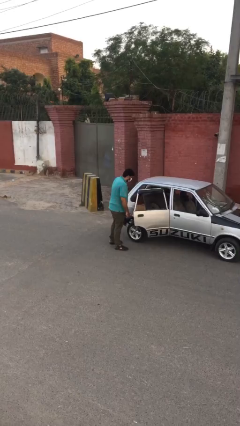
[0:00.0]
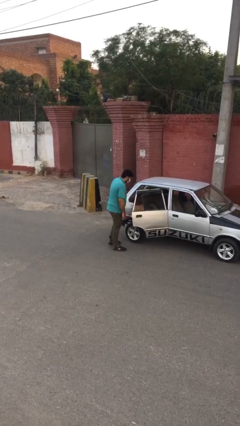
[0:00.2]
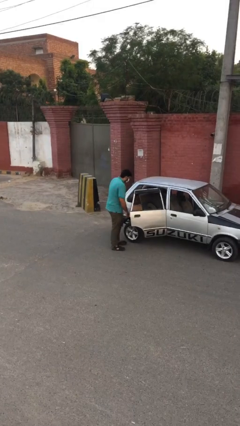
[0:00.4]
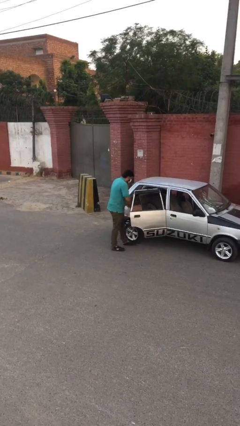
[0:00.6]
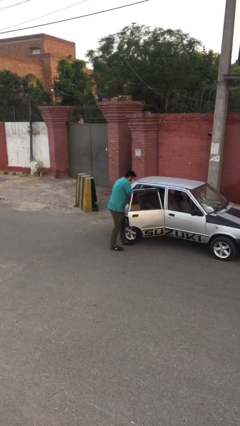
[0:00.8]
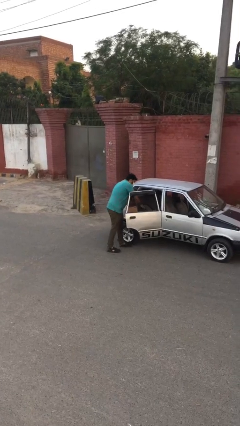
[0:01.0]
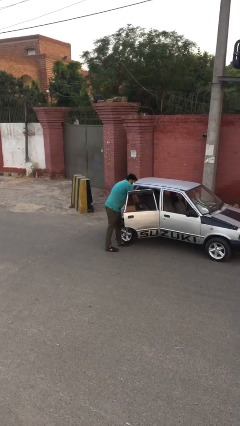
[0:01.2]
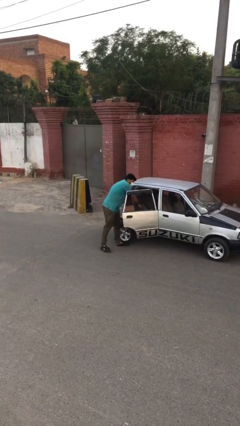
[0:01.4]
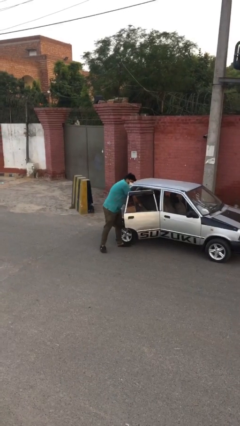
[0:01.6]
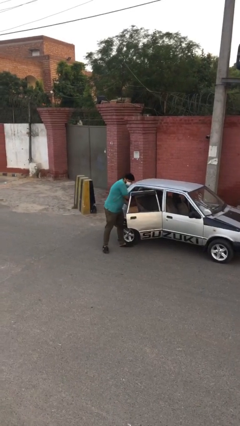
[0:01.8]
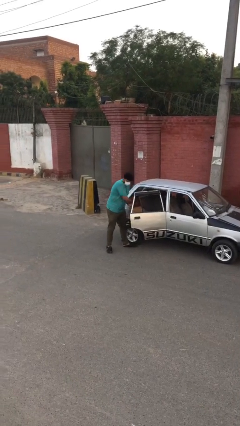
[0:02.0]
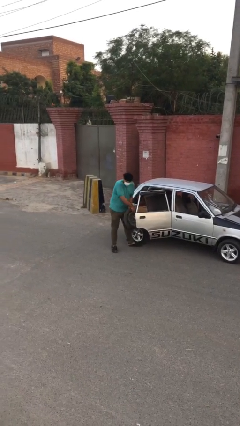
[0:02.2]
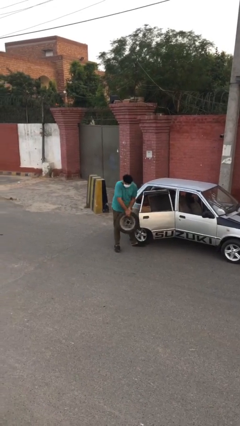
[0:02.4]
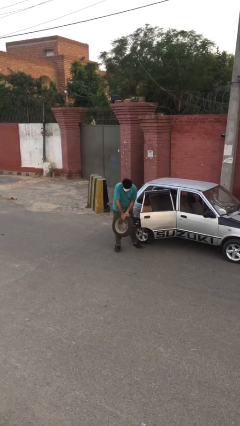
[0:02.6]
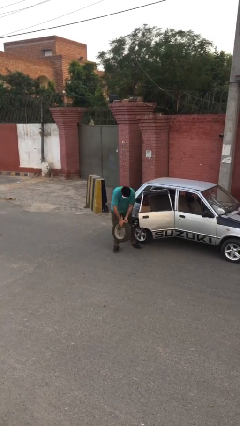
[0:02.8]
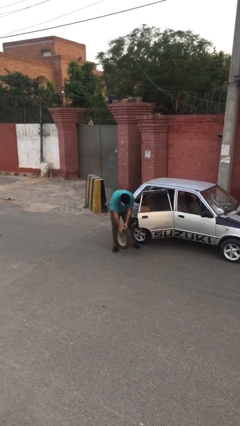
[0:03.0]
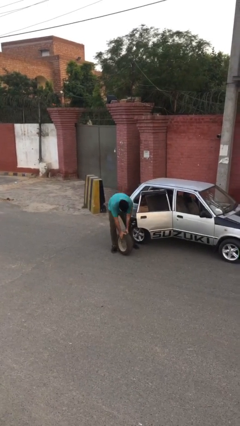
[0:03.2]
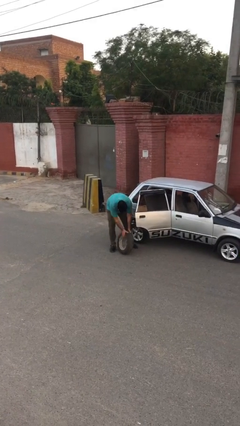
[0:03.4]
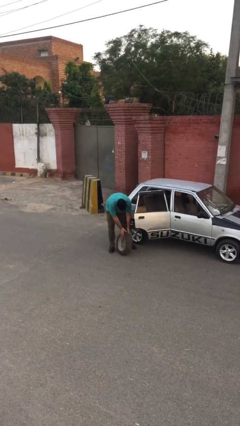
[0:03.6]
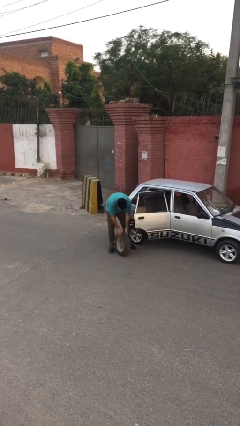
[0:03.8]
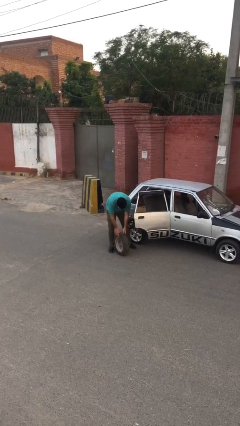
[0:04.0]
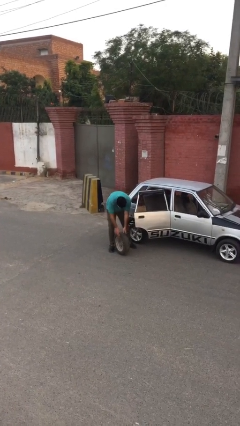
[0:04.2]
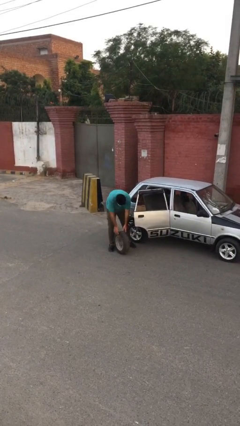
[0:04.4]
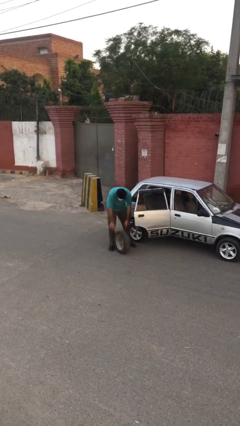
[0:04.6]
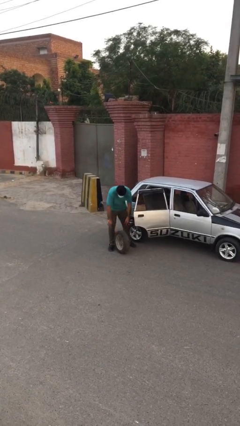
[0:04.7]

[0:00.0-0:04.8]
person unloads car

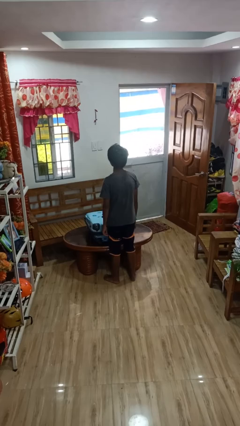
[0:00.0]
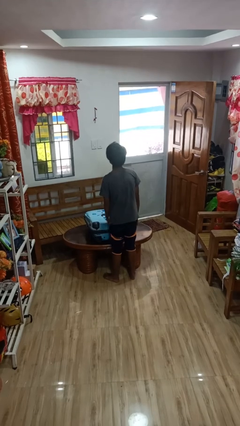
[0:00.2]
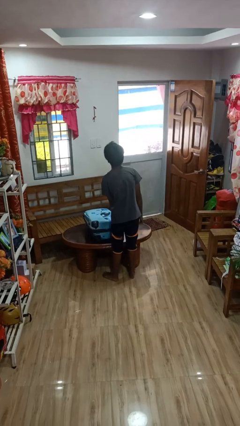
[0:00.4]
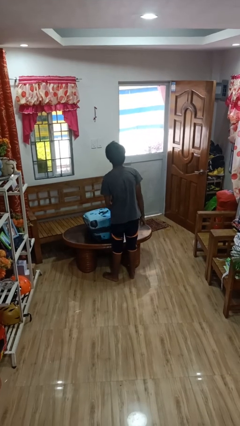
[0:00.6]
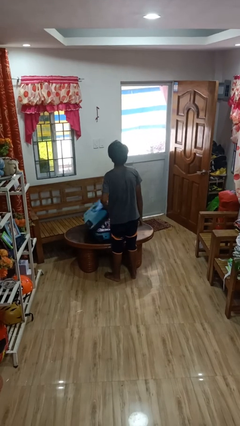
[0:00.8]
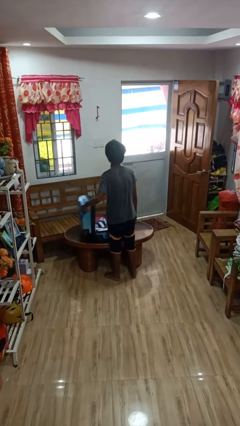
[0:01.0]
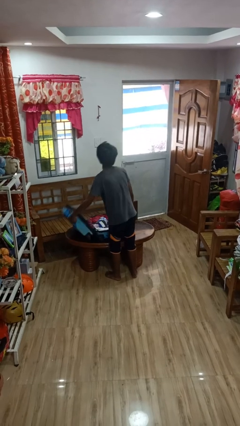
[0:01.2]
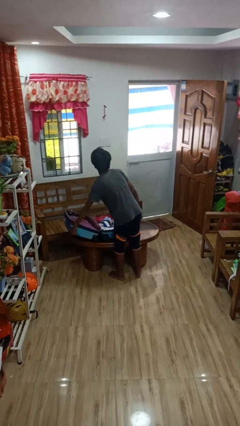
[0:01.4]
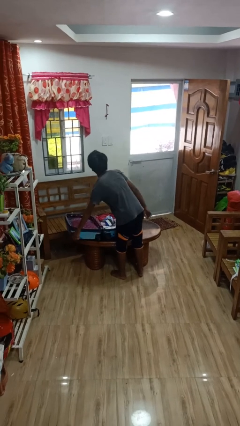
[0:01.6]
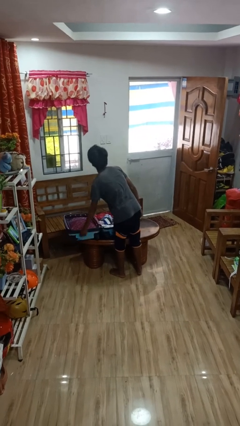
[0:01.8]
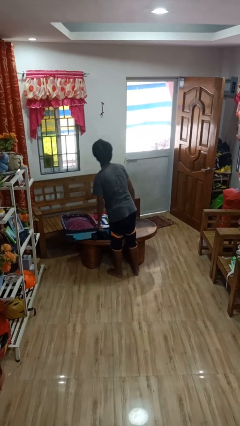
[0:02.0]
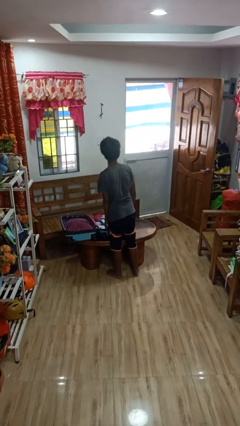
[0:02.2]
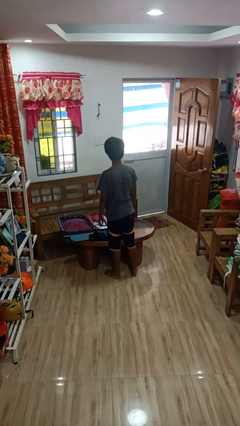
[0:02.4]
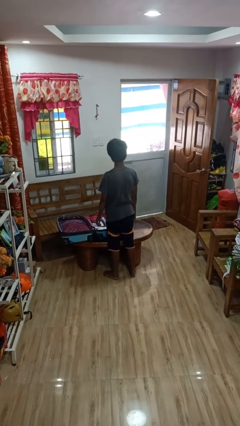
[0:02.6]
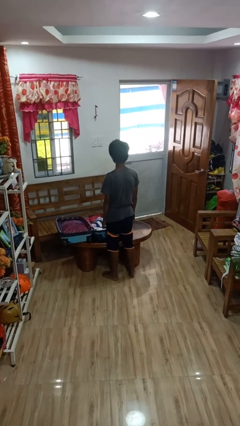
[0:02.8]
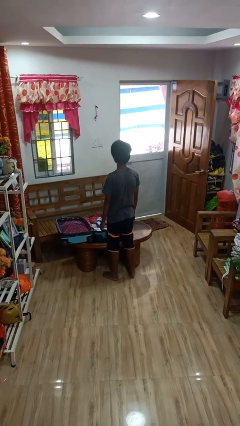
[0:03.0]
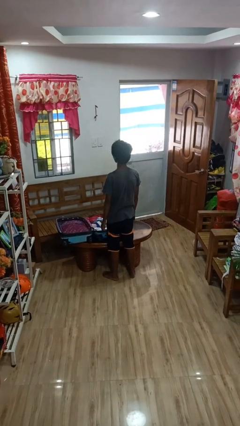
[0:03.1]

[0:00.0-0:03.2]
person opens suitcase

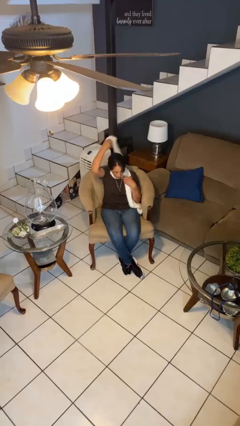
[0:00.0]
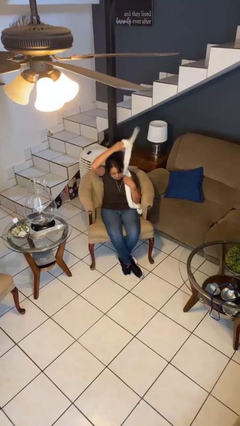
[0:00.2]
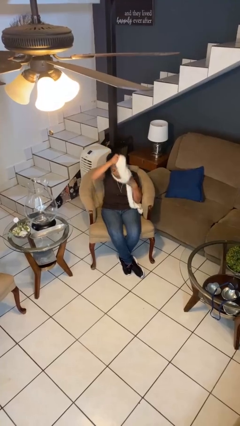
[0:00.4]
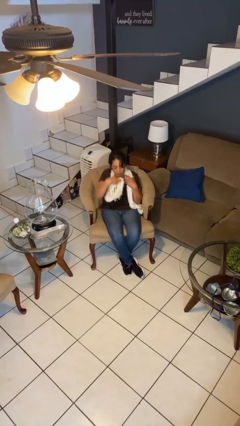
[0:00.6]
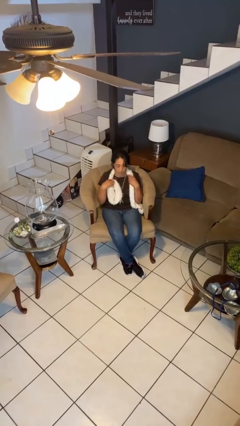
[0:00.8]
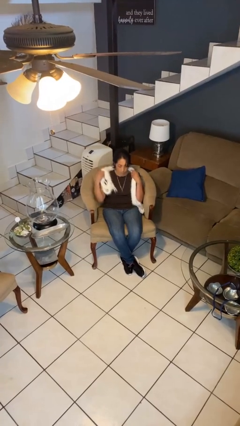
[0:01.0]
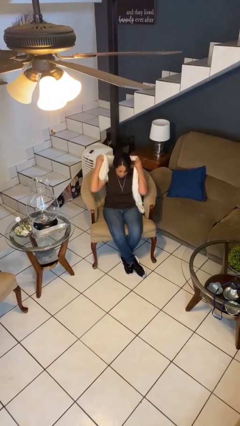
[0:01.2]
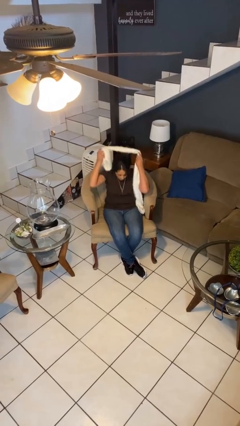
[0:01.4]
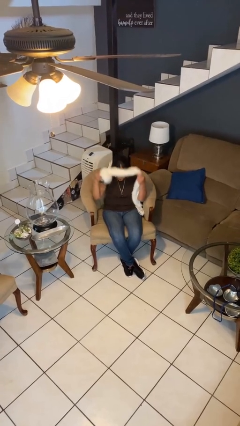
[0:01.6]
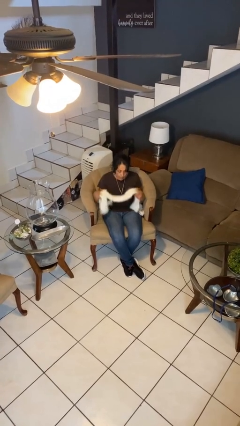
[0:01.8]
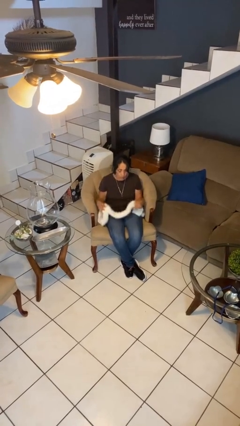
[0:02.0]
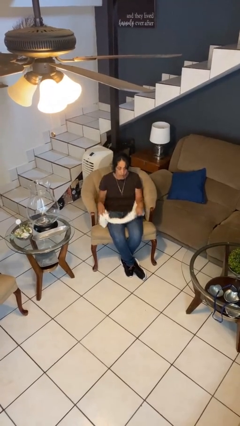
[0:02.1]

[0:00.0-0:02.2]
person takes off scarf

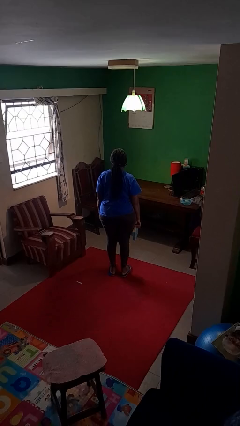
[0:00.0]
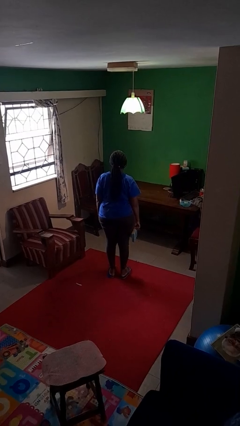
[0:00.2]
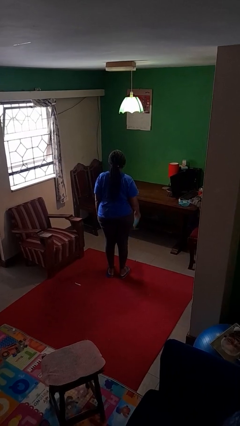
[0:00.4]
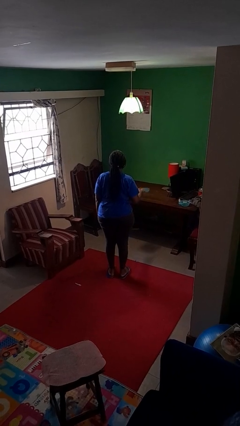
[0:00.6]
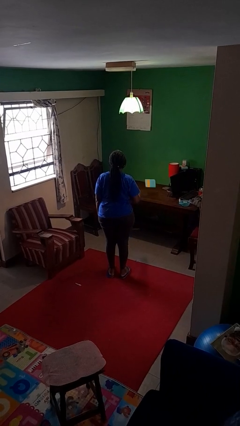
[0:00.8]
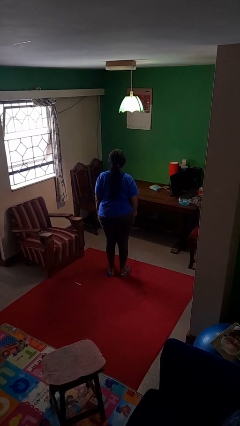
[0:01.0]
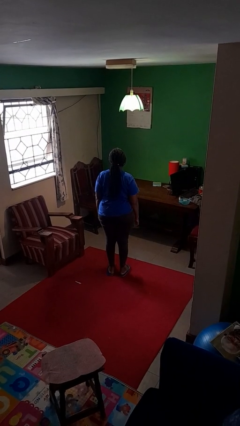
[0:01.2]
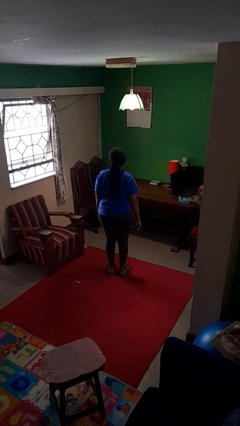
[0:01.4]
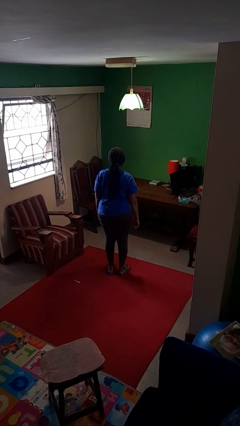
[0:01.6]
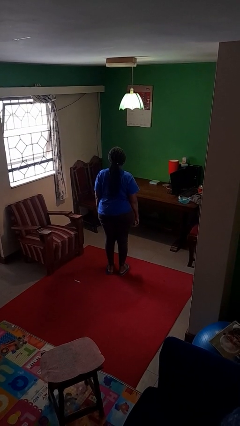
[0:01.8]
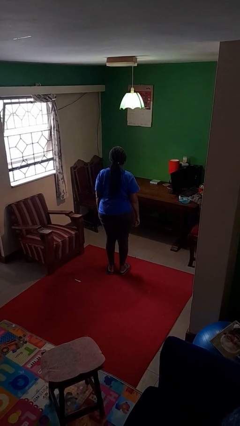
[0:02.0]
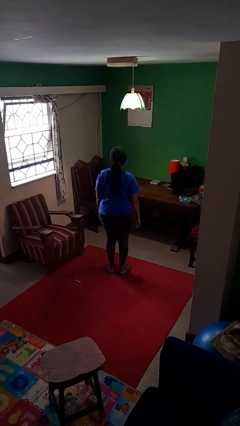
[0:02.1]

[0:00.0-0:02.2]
person throws object on table

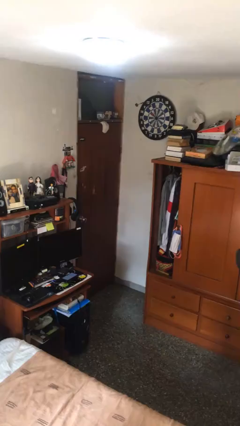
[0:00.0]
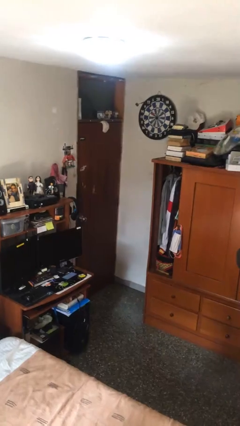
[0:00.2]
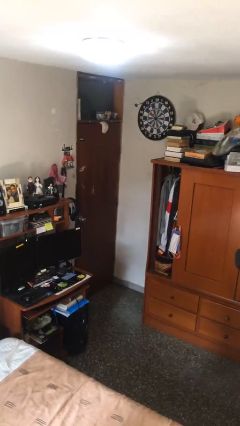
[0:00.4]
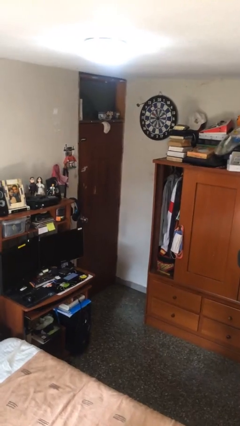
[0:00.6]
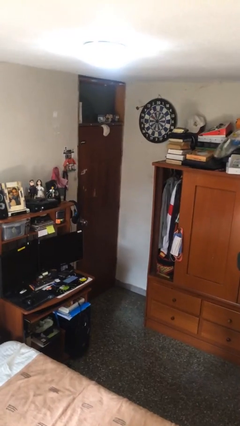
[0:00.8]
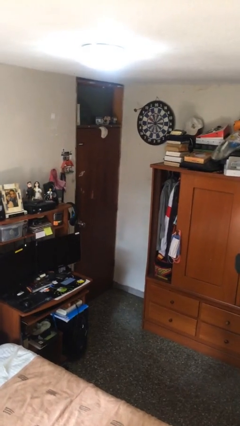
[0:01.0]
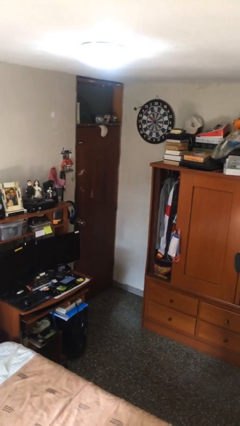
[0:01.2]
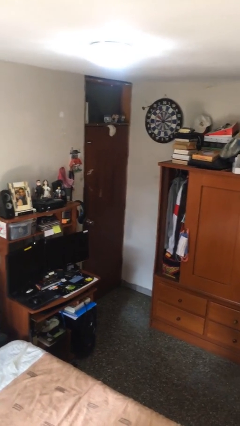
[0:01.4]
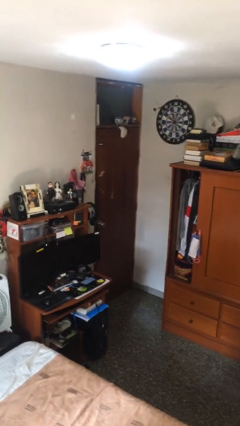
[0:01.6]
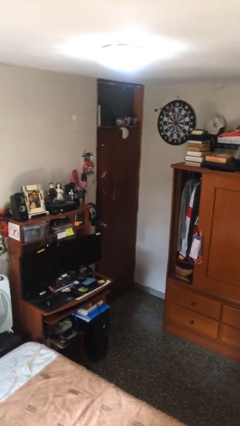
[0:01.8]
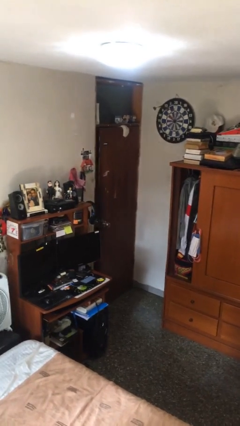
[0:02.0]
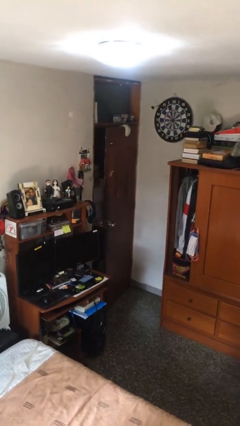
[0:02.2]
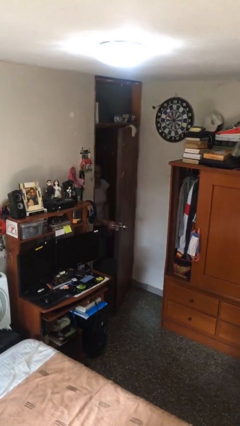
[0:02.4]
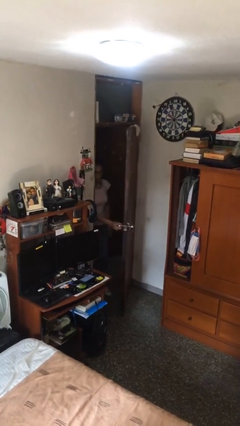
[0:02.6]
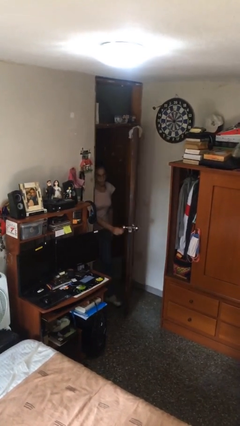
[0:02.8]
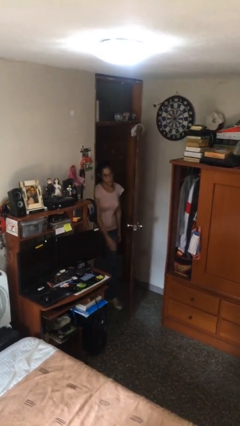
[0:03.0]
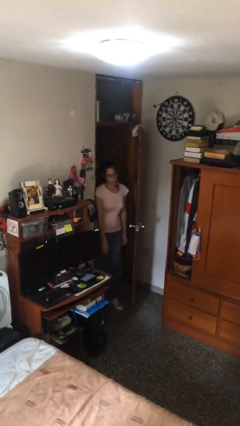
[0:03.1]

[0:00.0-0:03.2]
person opens facility door

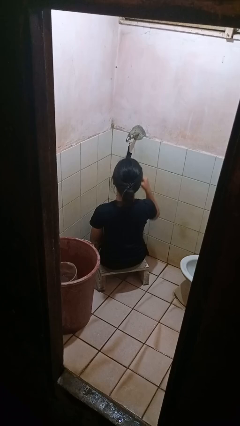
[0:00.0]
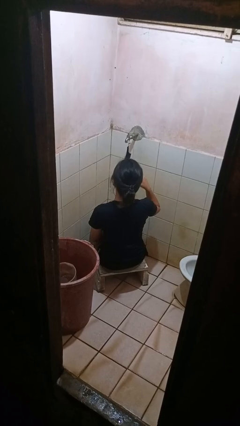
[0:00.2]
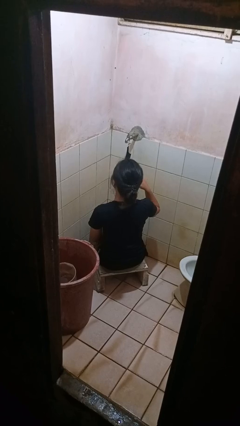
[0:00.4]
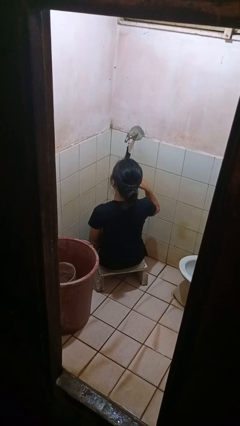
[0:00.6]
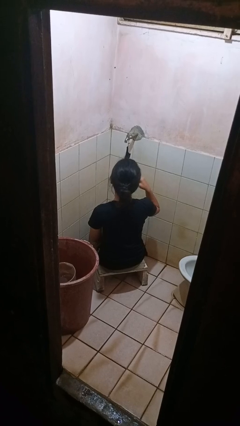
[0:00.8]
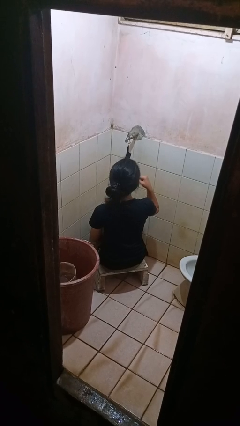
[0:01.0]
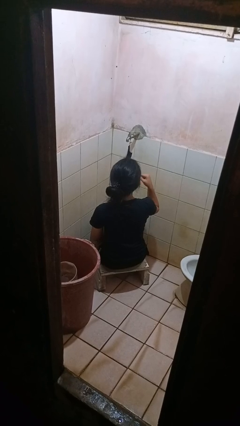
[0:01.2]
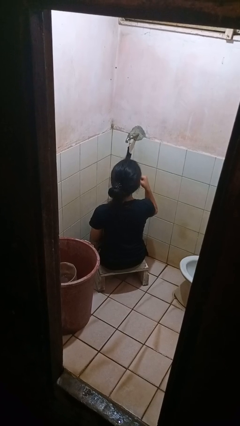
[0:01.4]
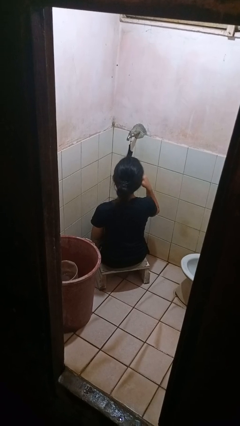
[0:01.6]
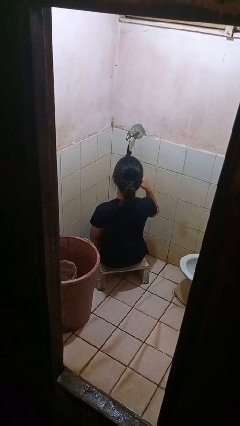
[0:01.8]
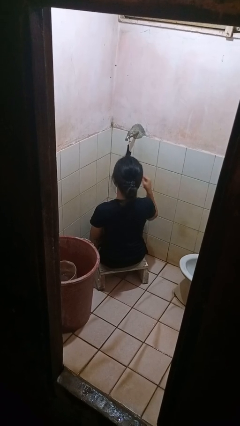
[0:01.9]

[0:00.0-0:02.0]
person brushes teeth

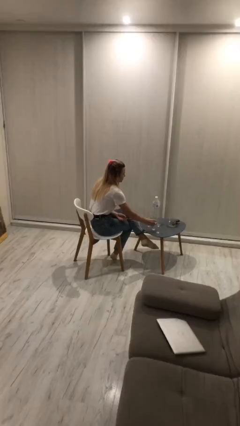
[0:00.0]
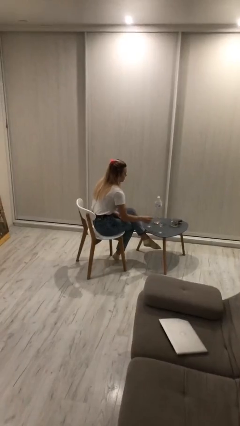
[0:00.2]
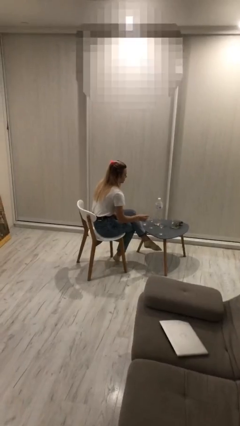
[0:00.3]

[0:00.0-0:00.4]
person picks up object from table
